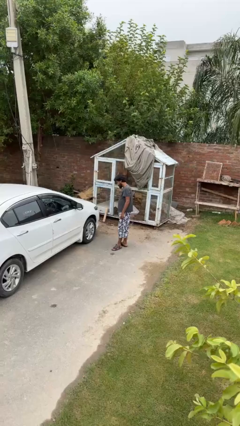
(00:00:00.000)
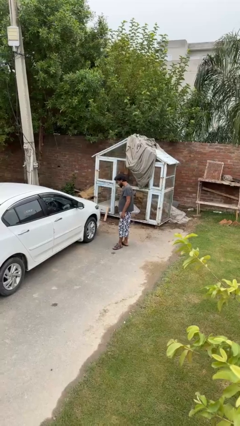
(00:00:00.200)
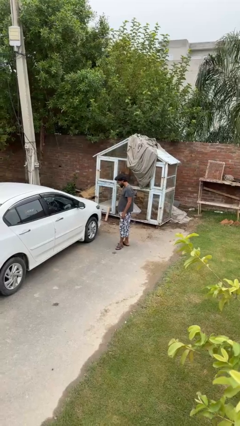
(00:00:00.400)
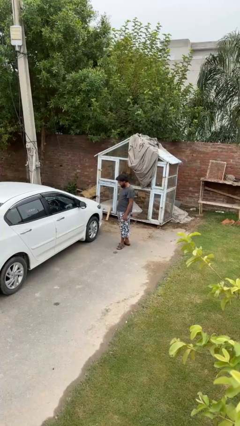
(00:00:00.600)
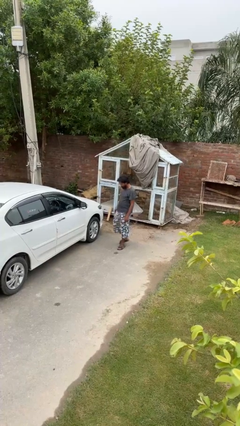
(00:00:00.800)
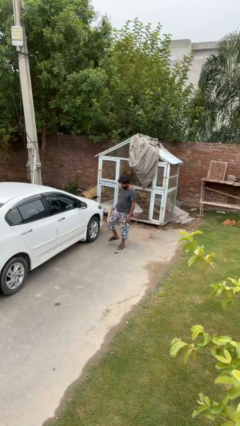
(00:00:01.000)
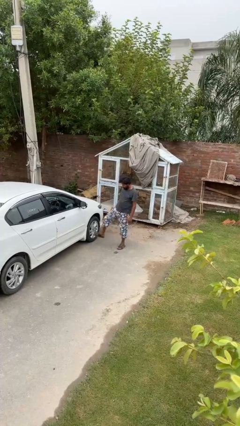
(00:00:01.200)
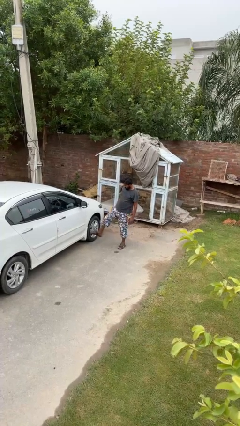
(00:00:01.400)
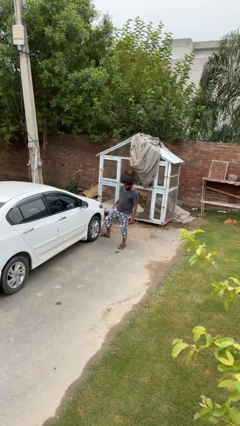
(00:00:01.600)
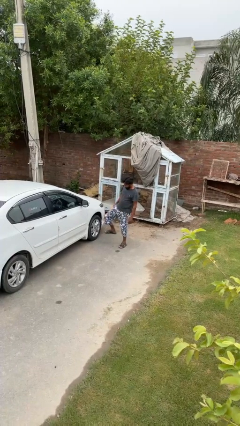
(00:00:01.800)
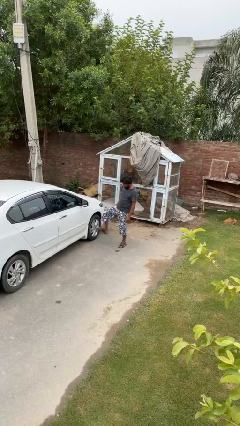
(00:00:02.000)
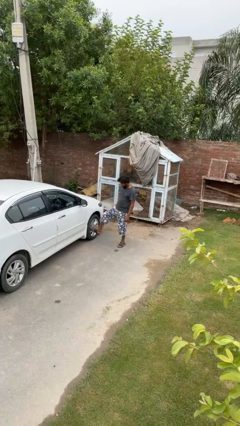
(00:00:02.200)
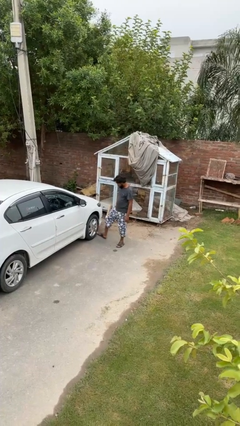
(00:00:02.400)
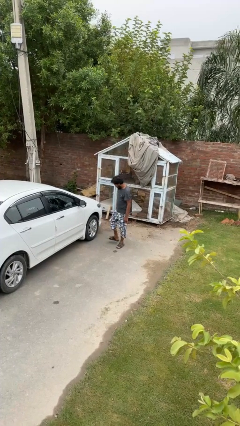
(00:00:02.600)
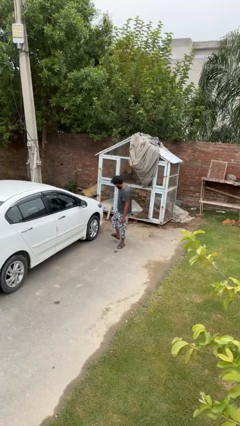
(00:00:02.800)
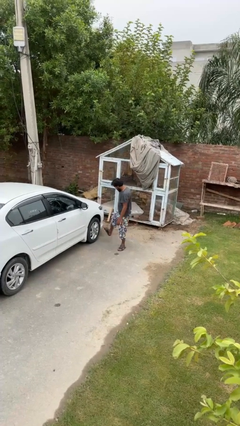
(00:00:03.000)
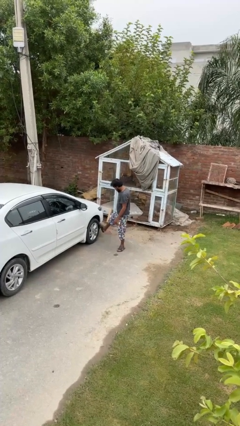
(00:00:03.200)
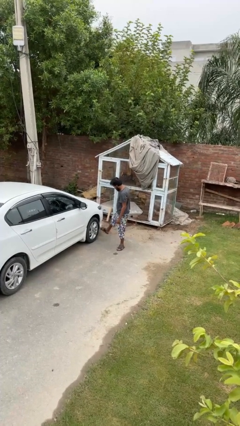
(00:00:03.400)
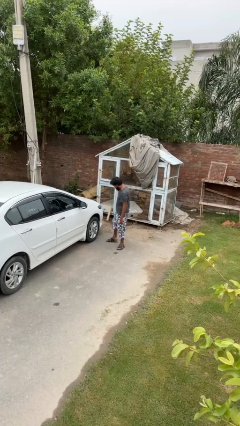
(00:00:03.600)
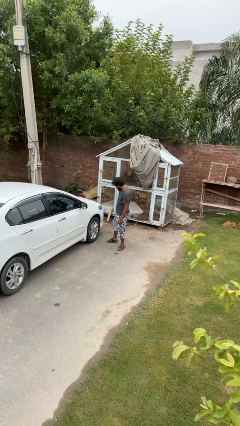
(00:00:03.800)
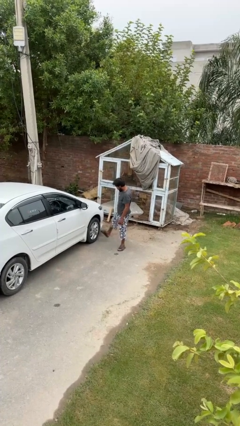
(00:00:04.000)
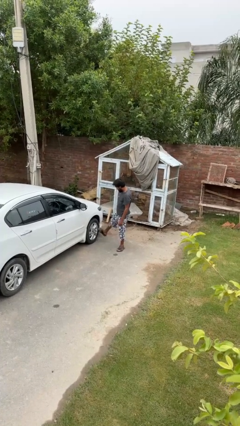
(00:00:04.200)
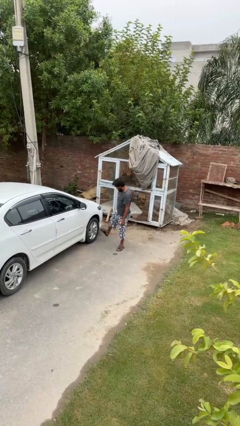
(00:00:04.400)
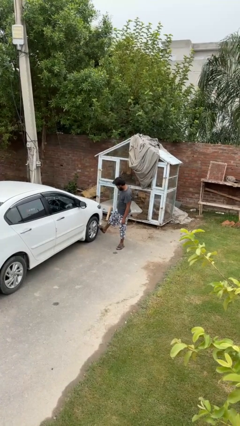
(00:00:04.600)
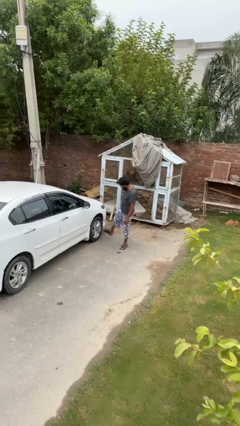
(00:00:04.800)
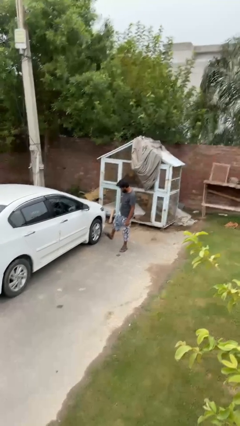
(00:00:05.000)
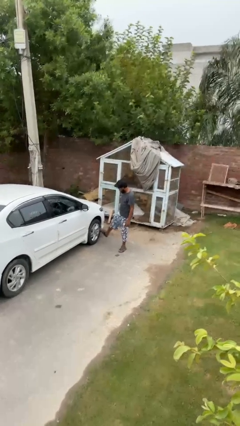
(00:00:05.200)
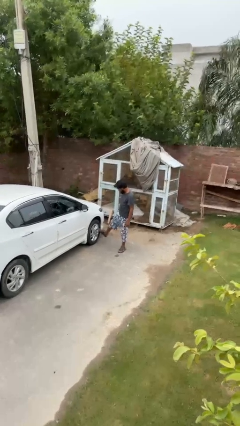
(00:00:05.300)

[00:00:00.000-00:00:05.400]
person kicks car tires

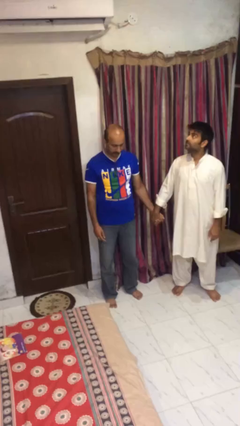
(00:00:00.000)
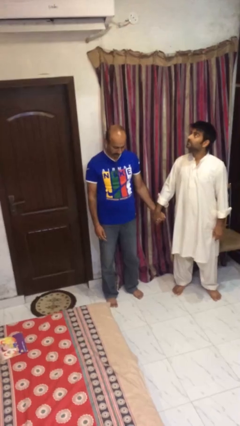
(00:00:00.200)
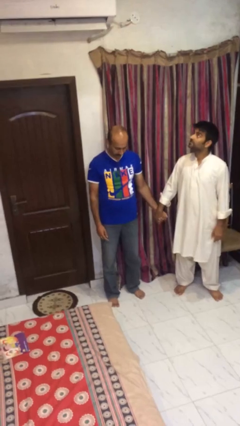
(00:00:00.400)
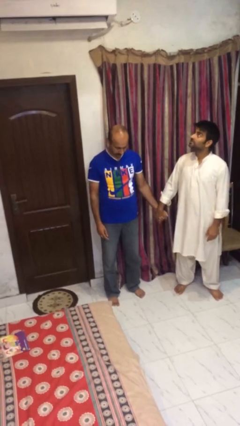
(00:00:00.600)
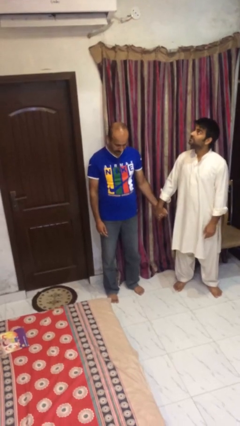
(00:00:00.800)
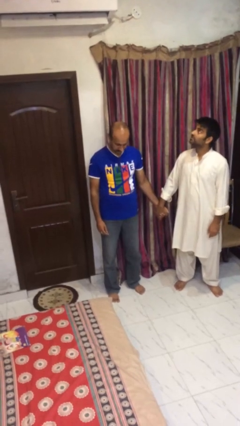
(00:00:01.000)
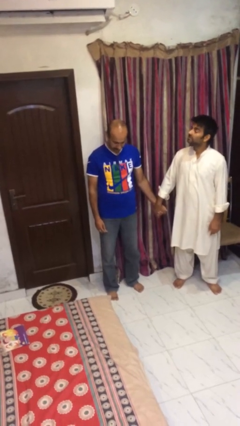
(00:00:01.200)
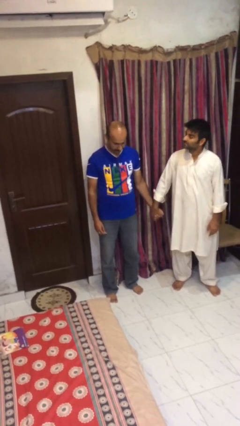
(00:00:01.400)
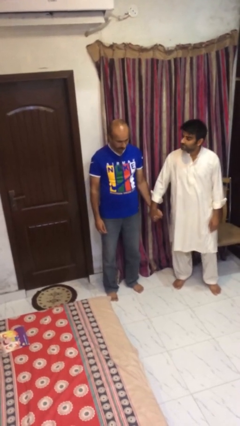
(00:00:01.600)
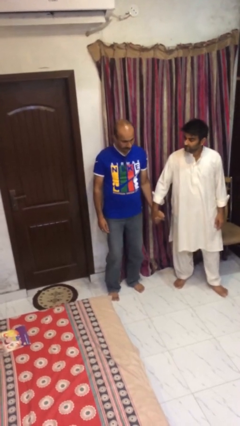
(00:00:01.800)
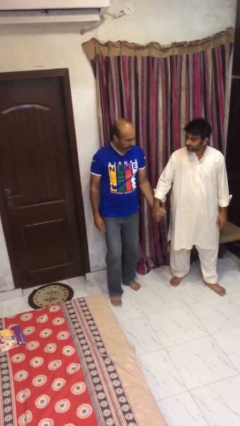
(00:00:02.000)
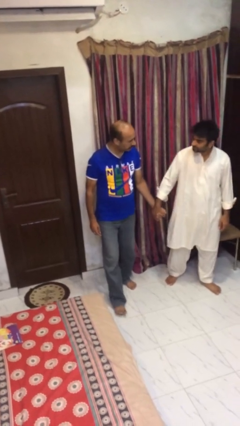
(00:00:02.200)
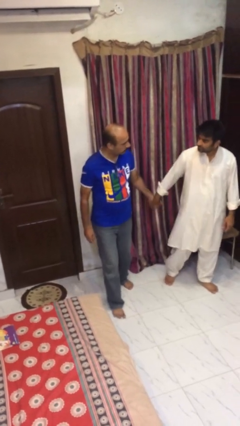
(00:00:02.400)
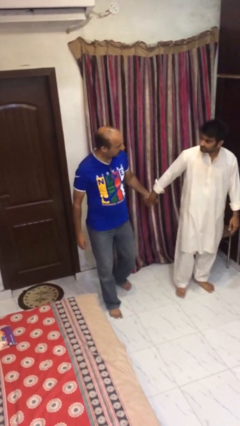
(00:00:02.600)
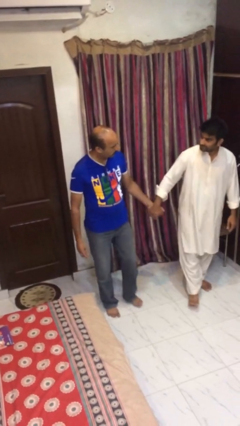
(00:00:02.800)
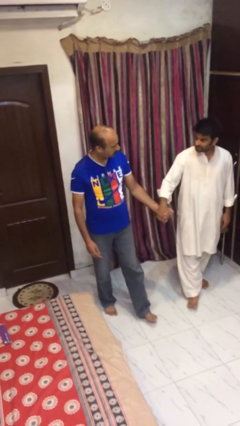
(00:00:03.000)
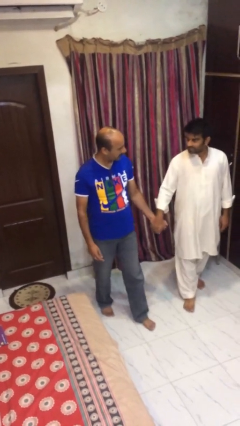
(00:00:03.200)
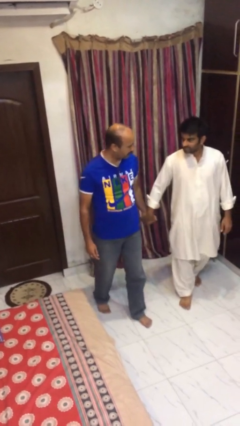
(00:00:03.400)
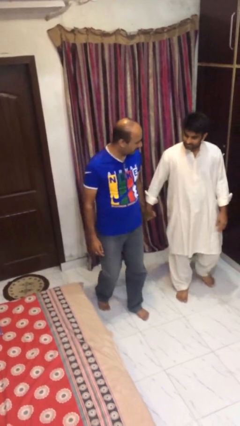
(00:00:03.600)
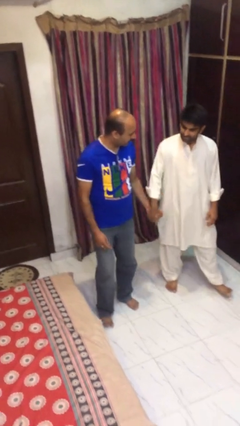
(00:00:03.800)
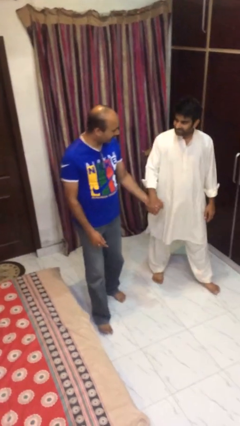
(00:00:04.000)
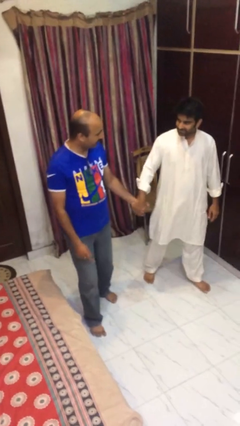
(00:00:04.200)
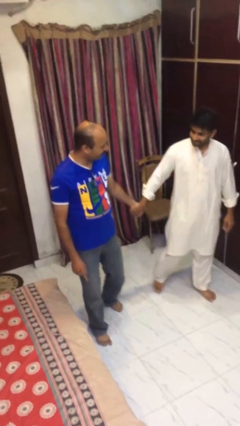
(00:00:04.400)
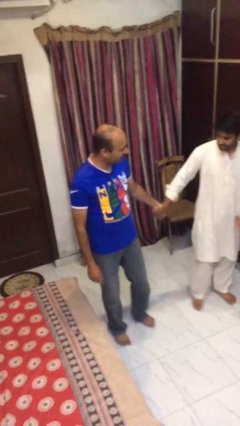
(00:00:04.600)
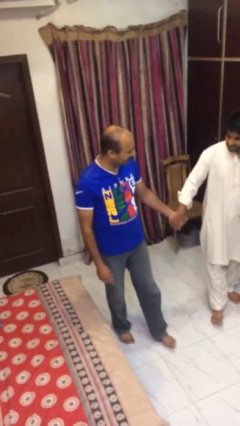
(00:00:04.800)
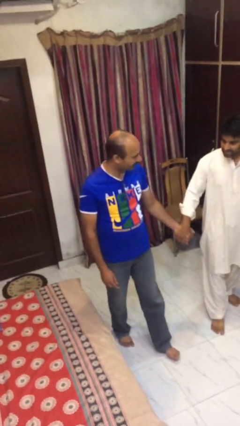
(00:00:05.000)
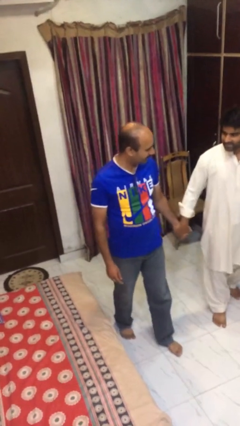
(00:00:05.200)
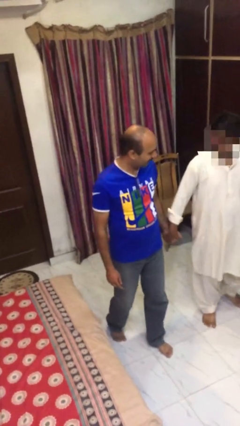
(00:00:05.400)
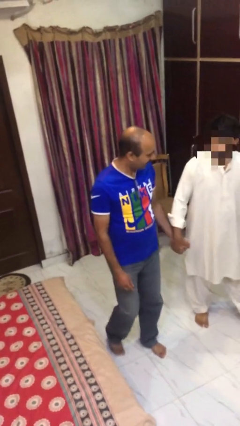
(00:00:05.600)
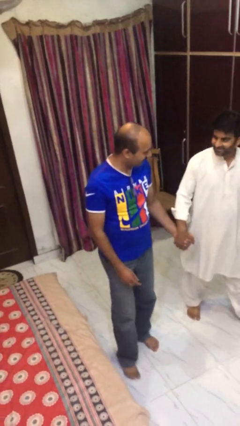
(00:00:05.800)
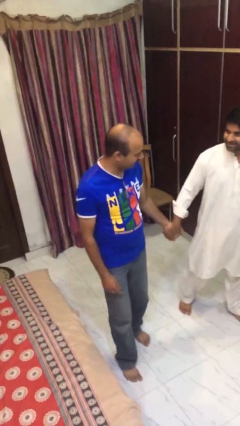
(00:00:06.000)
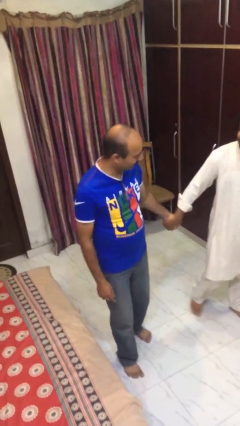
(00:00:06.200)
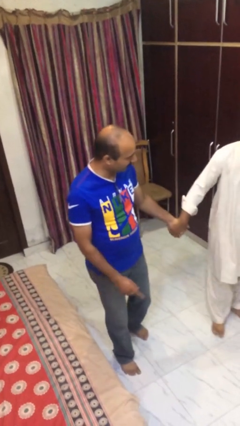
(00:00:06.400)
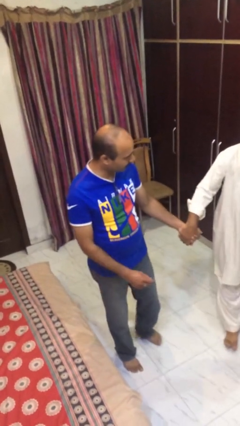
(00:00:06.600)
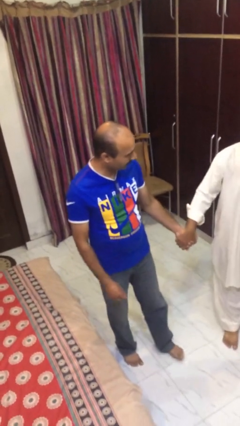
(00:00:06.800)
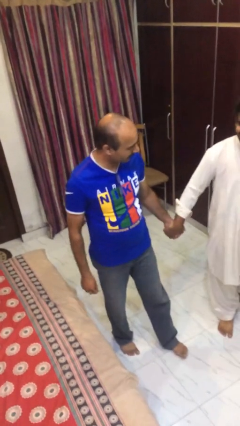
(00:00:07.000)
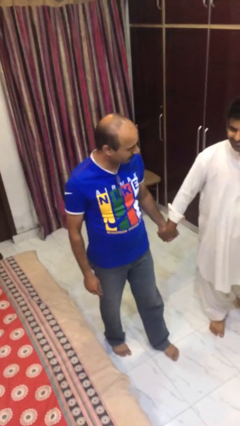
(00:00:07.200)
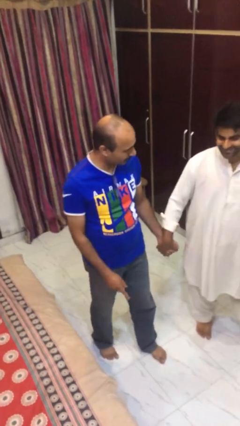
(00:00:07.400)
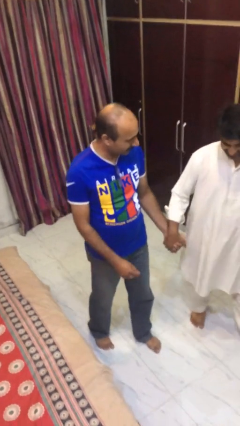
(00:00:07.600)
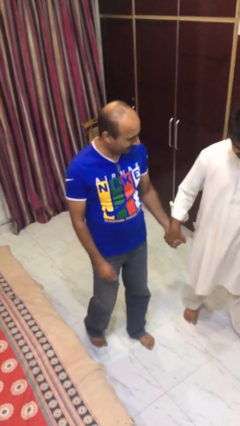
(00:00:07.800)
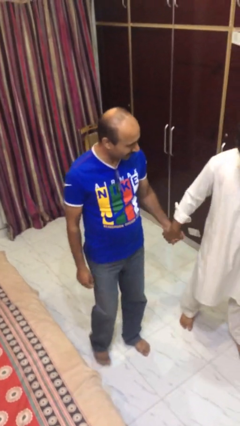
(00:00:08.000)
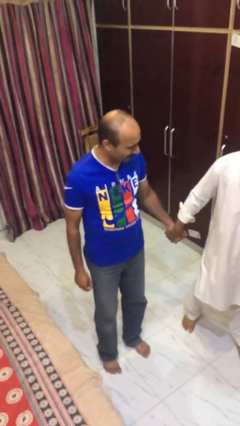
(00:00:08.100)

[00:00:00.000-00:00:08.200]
person holds hand

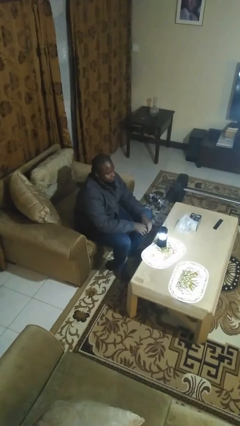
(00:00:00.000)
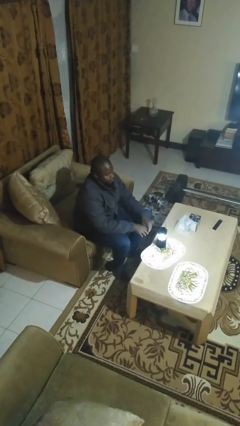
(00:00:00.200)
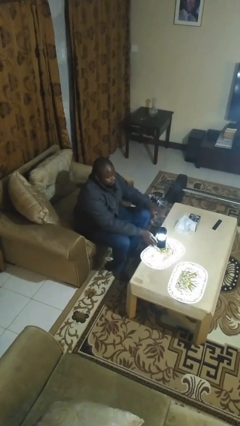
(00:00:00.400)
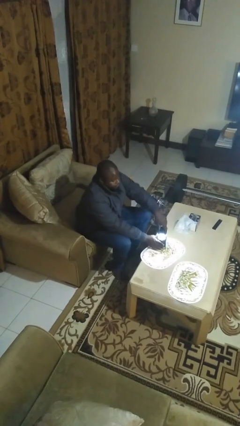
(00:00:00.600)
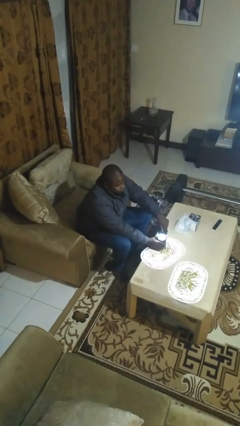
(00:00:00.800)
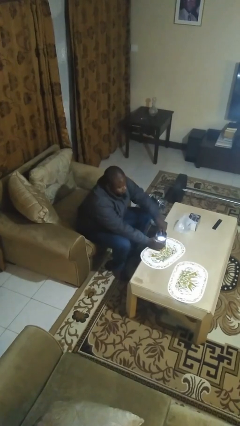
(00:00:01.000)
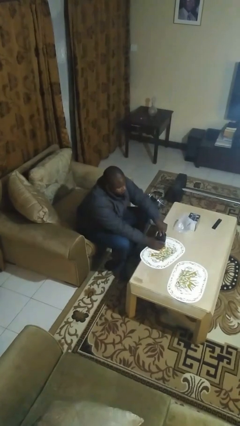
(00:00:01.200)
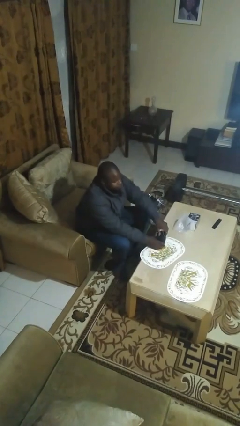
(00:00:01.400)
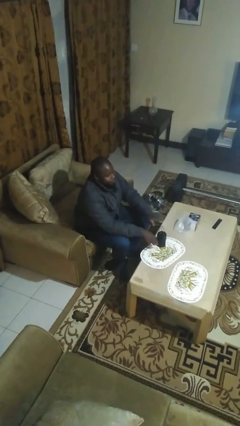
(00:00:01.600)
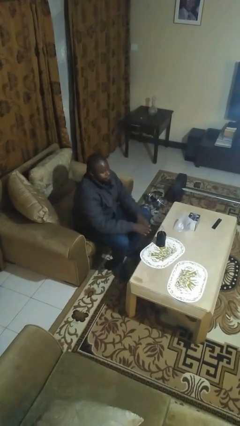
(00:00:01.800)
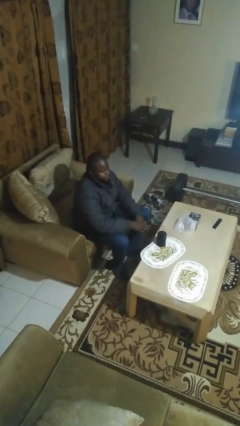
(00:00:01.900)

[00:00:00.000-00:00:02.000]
person turns off lamp

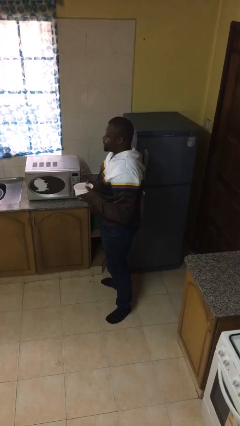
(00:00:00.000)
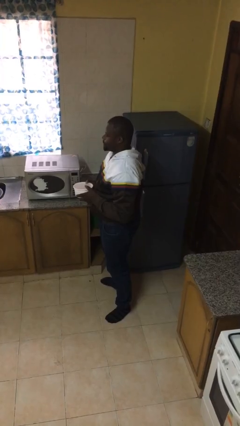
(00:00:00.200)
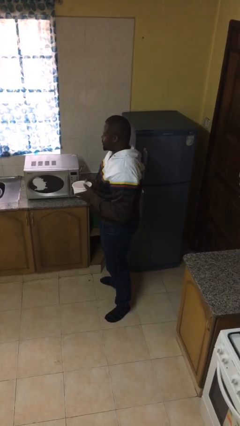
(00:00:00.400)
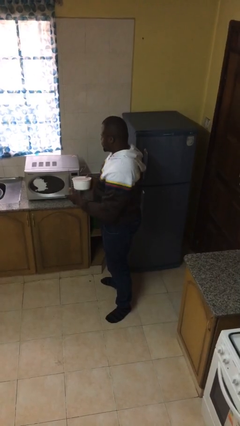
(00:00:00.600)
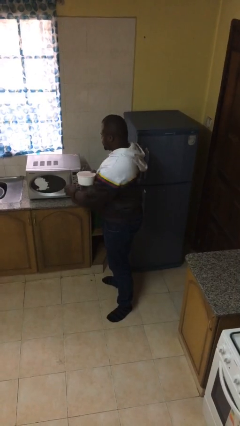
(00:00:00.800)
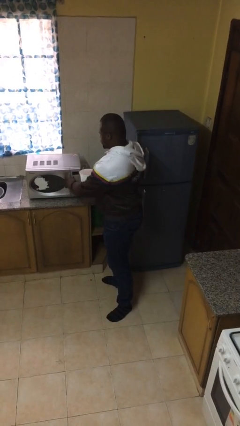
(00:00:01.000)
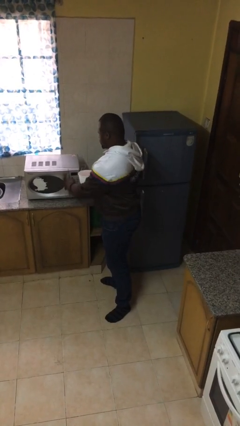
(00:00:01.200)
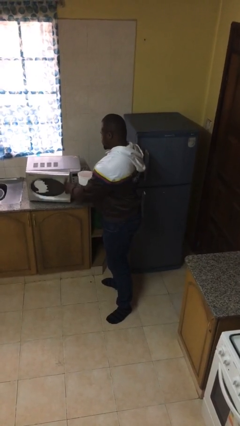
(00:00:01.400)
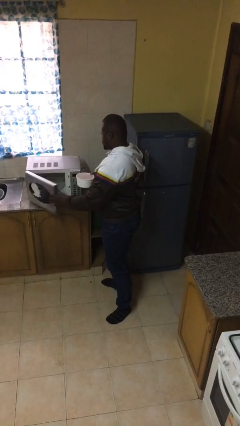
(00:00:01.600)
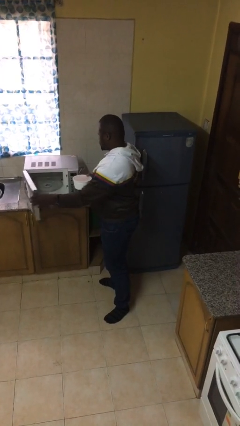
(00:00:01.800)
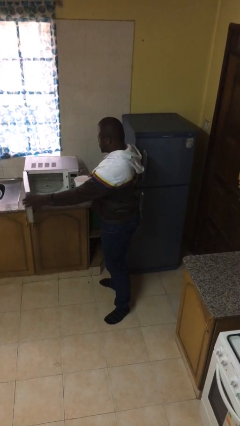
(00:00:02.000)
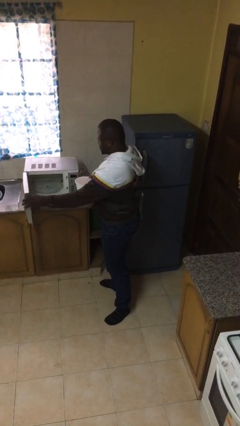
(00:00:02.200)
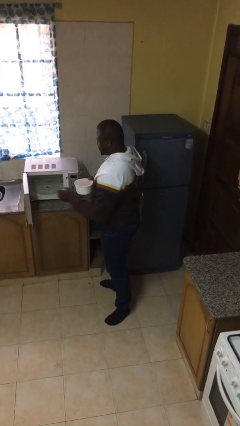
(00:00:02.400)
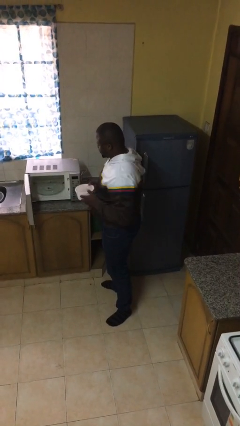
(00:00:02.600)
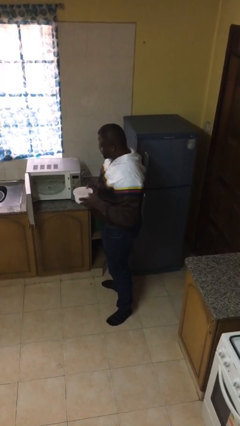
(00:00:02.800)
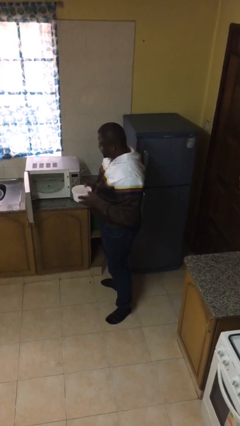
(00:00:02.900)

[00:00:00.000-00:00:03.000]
person opens microwave
